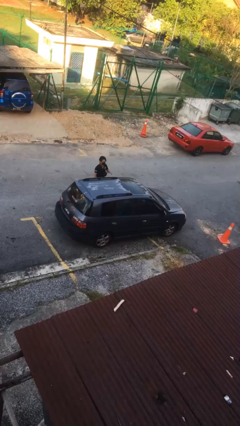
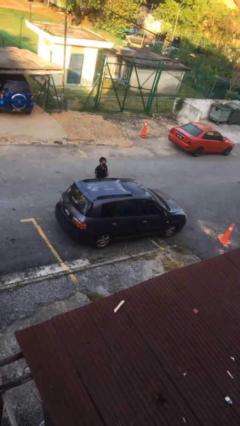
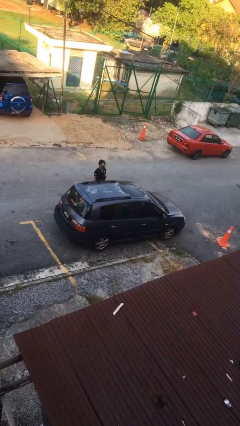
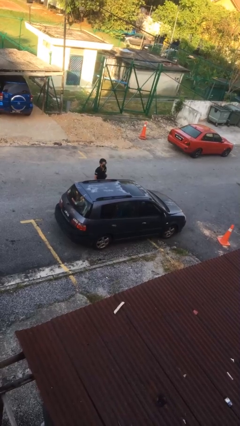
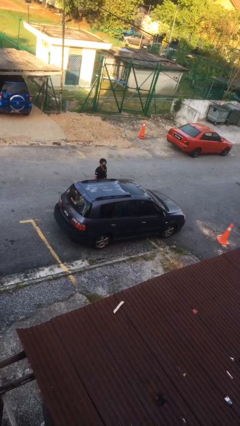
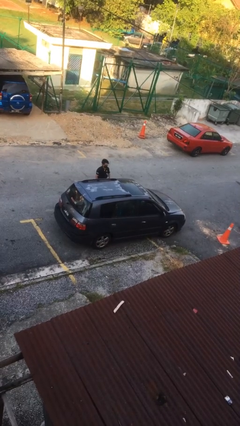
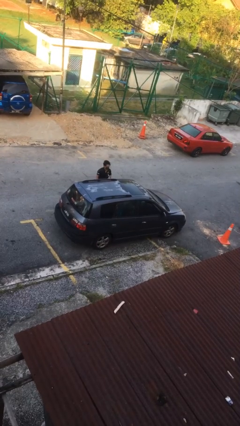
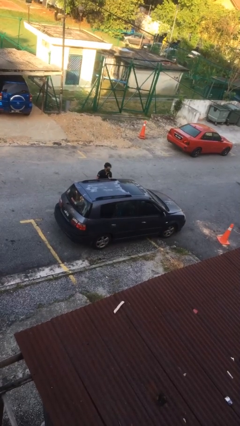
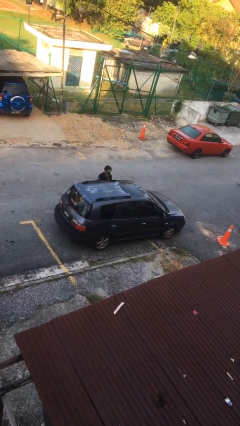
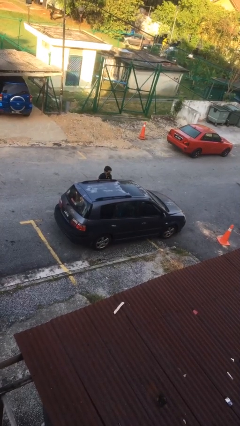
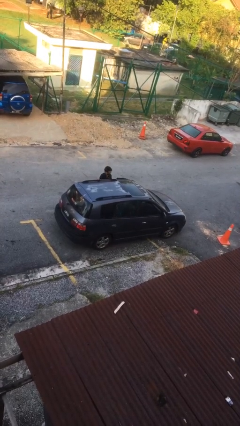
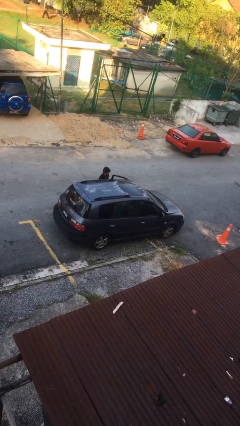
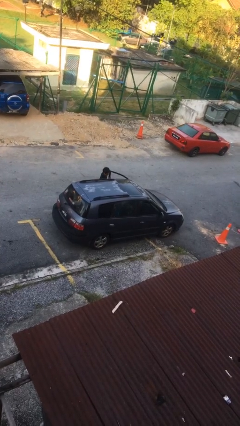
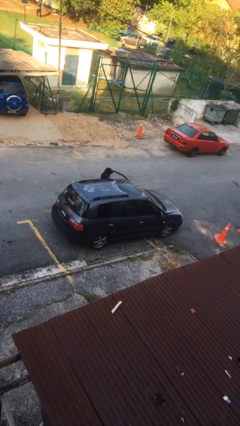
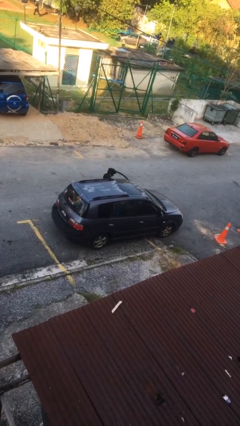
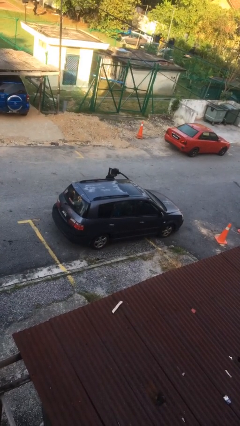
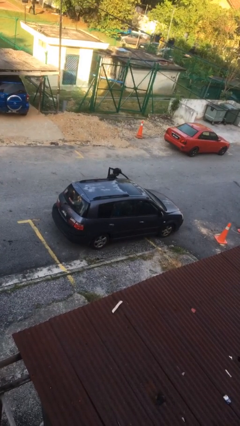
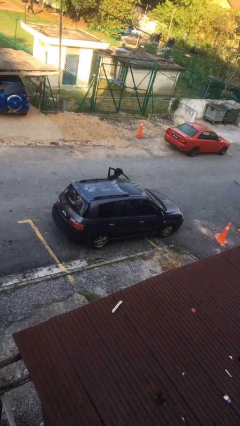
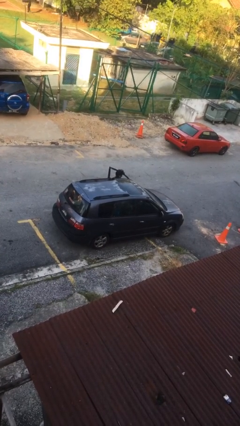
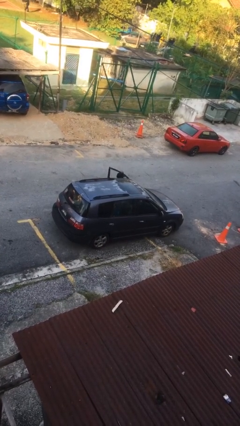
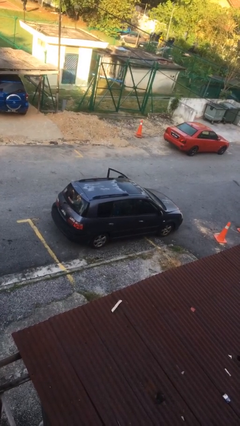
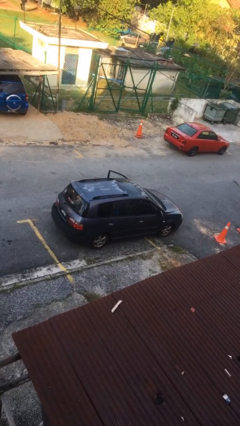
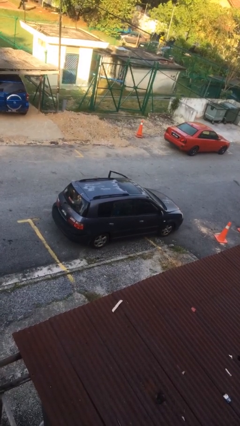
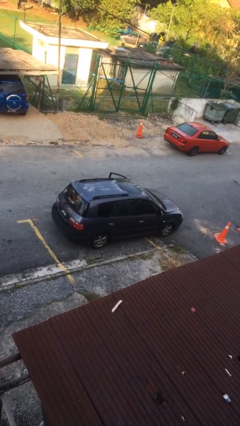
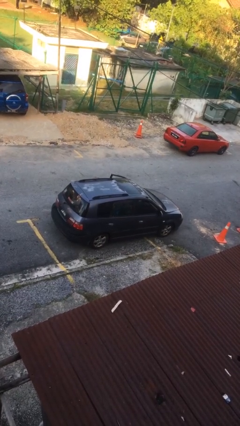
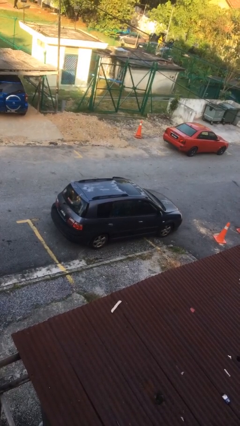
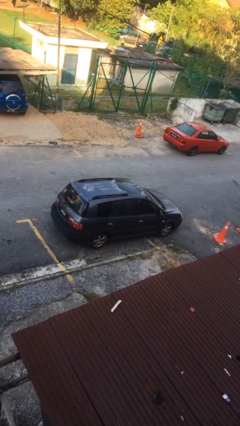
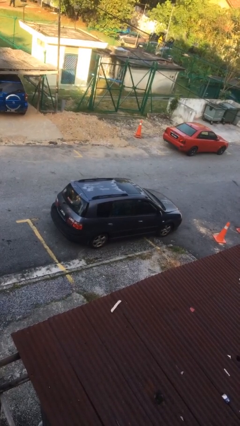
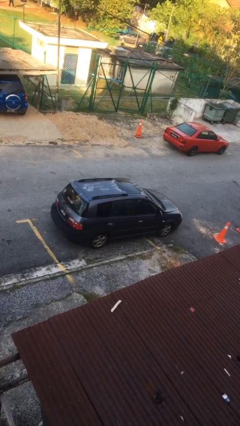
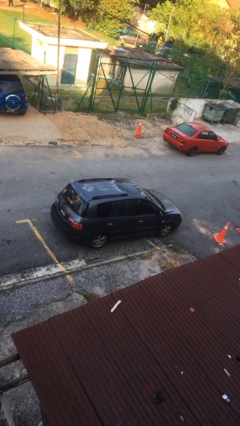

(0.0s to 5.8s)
car picks up person

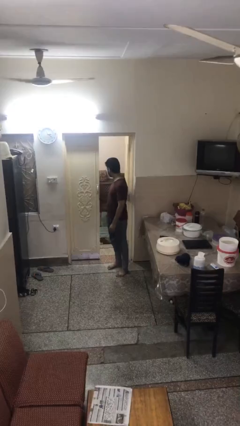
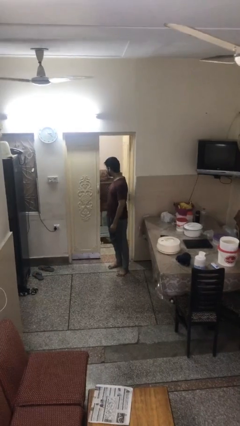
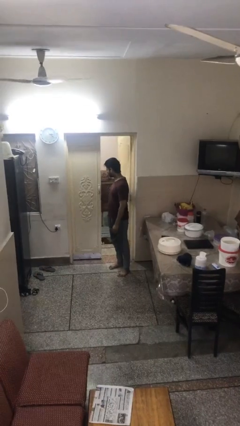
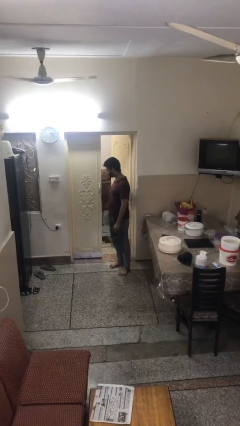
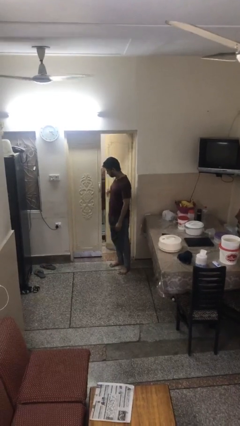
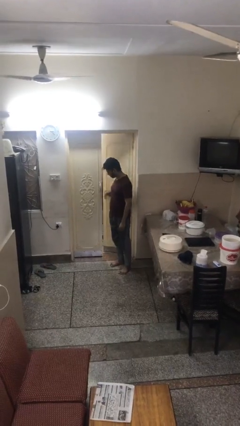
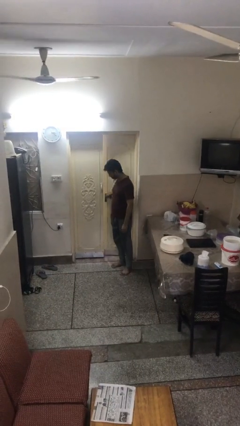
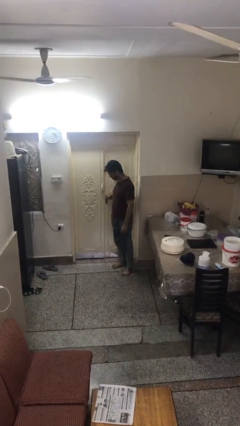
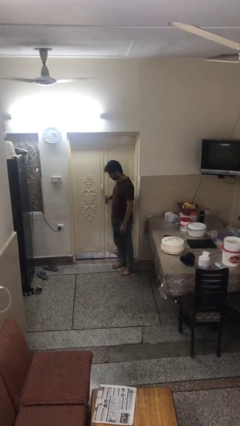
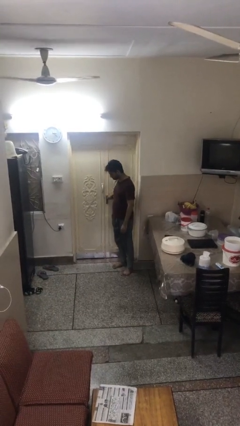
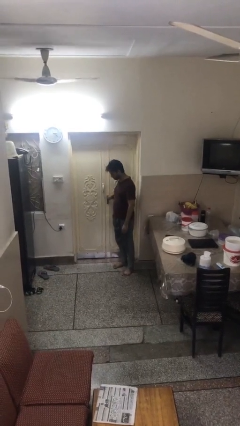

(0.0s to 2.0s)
person closes facility door

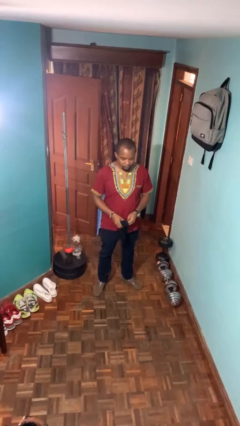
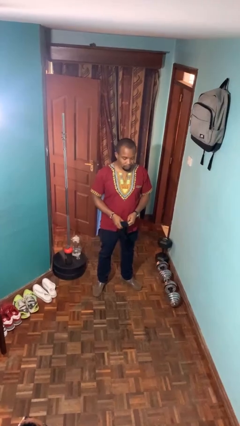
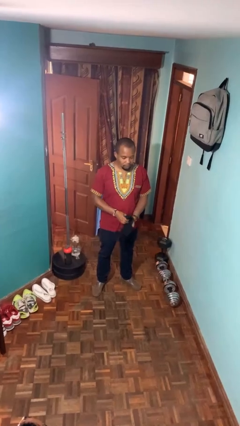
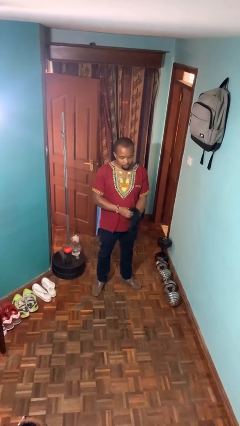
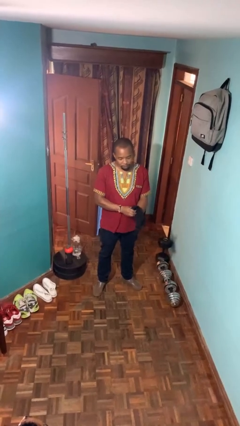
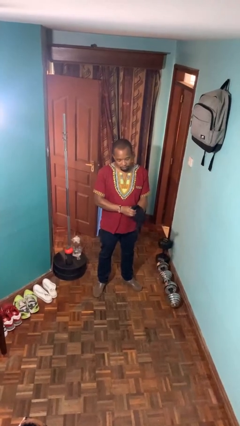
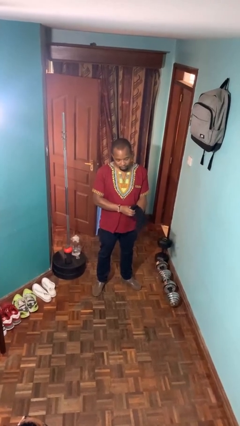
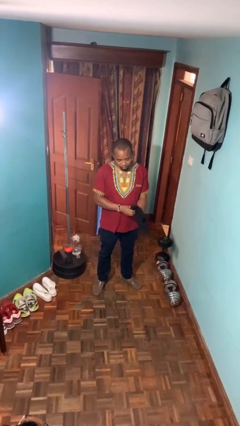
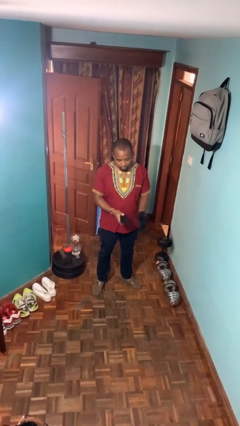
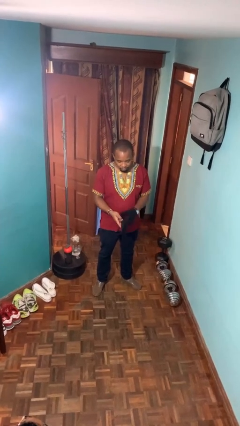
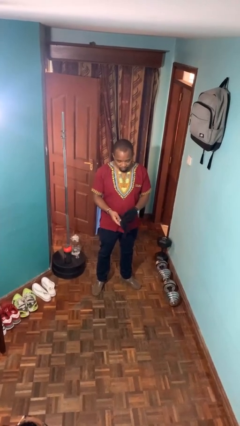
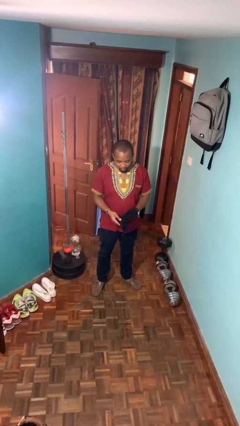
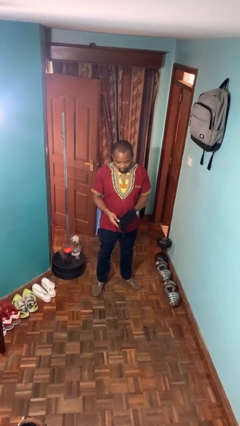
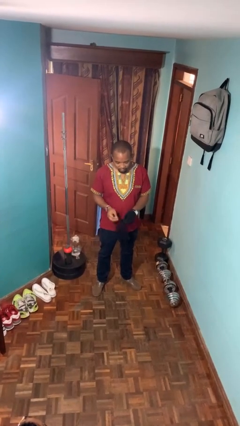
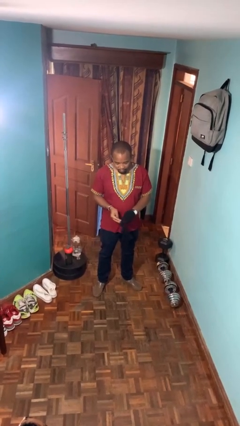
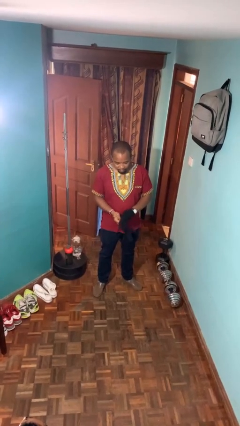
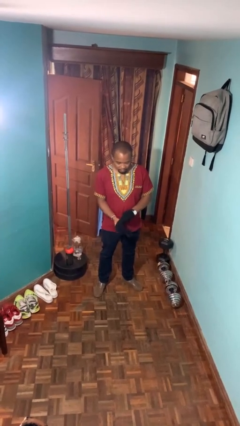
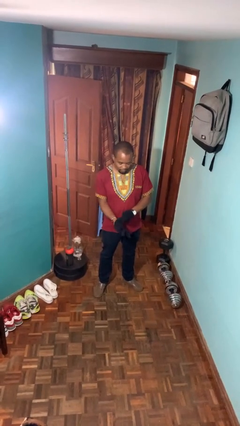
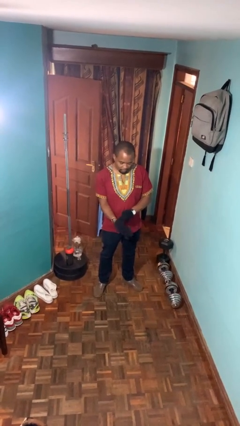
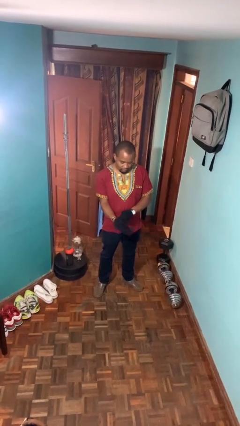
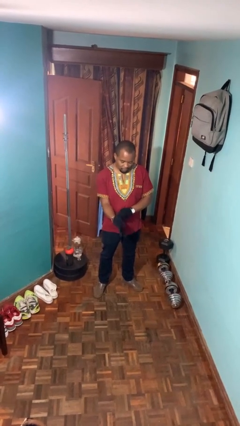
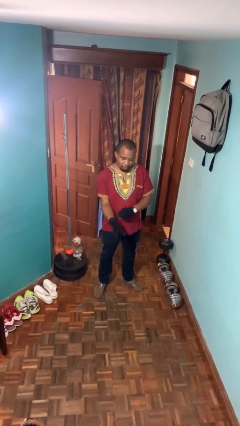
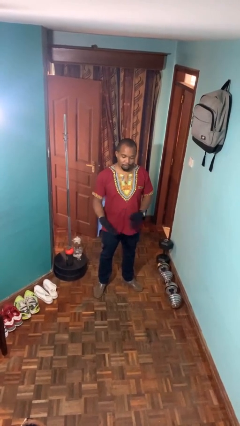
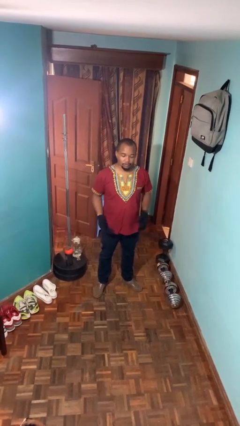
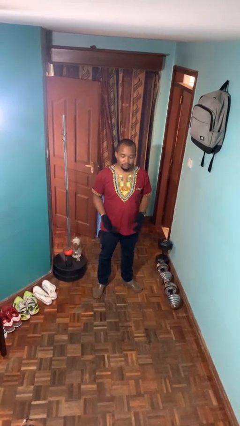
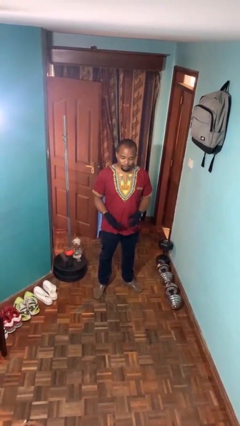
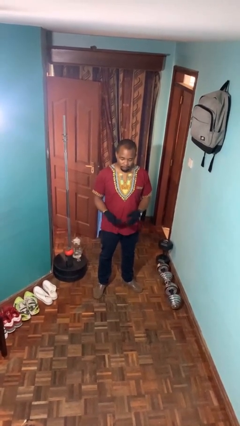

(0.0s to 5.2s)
person puts on gloves

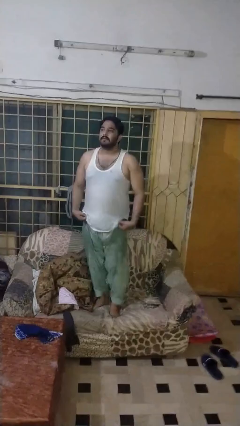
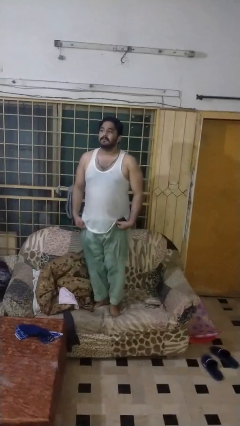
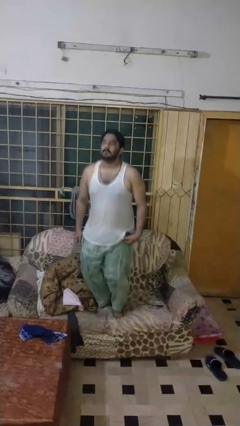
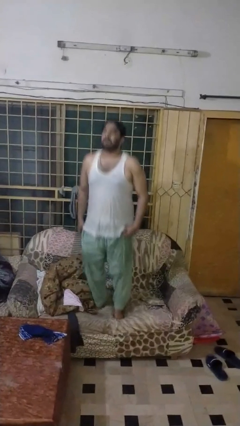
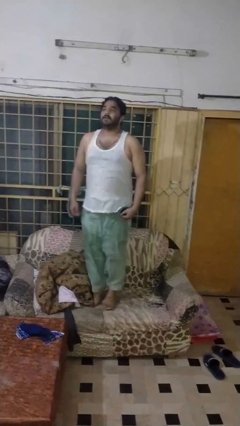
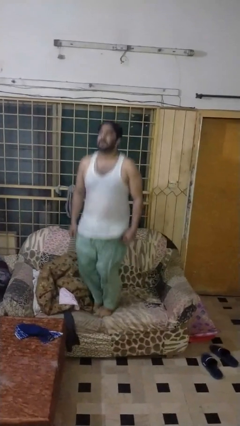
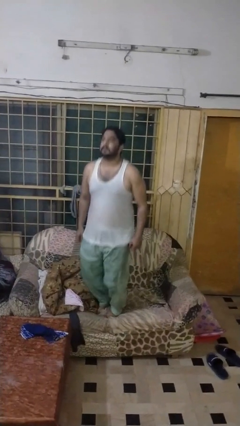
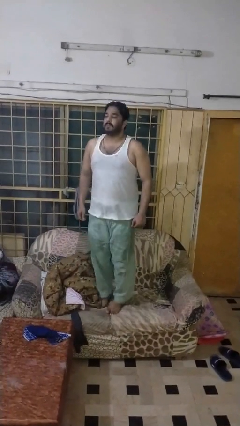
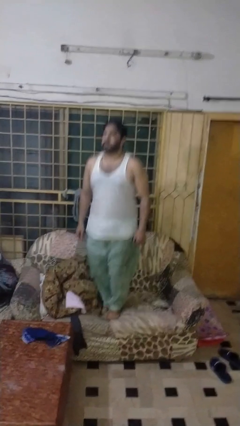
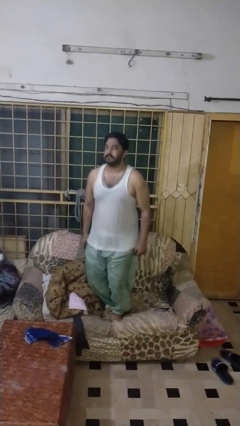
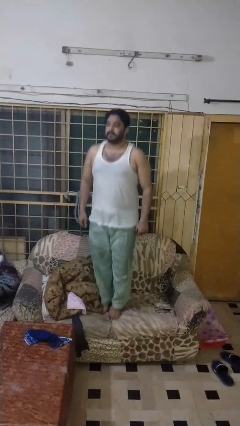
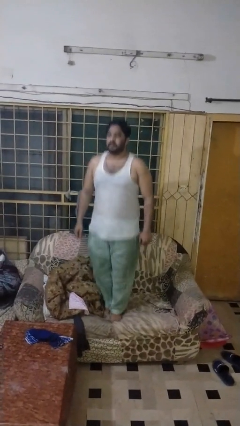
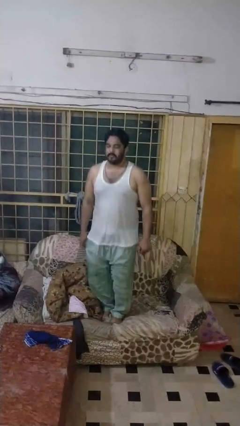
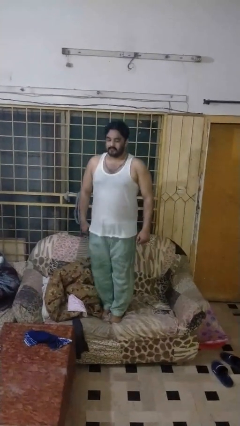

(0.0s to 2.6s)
person jumps on couch

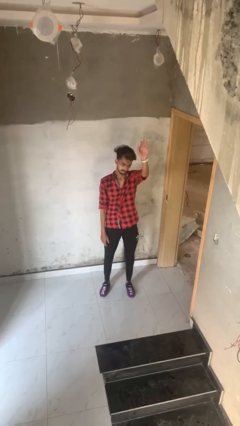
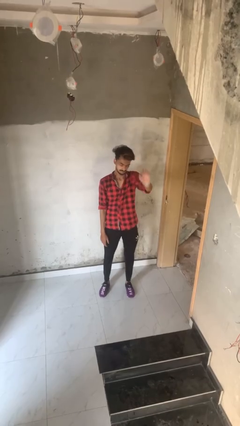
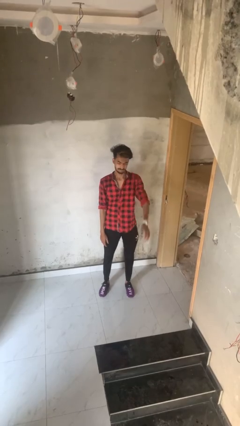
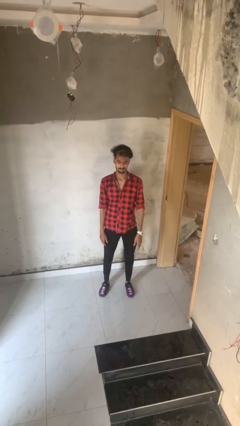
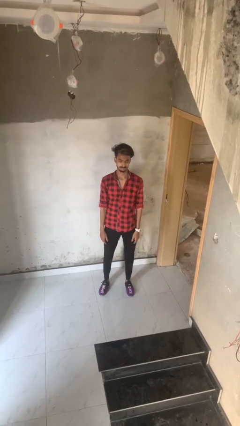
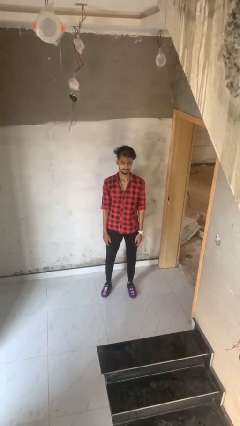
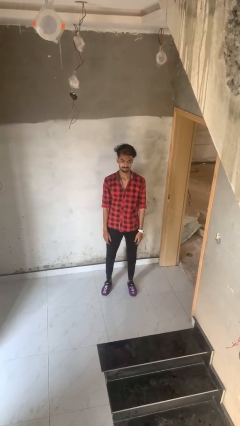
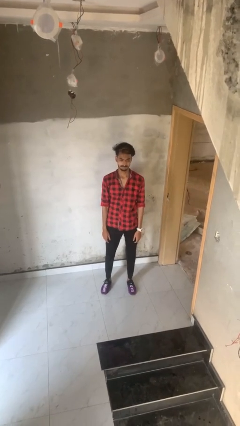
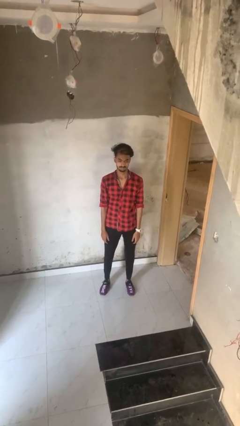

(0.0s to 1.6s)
person gestures lower hand

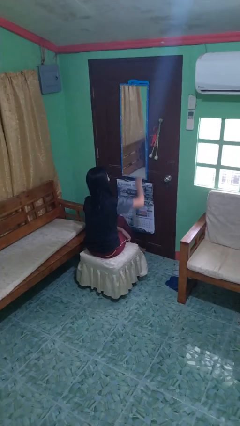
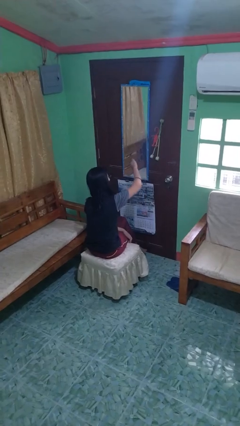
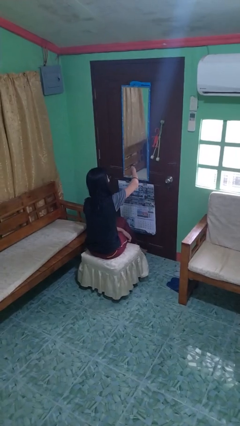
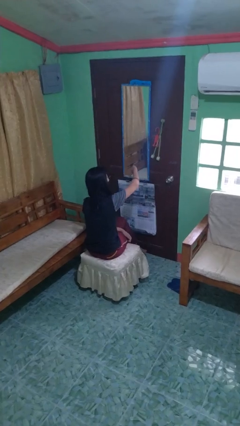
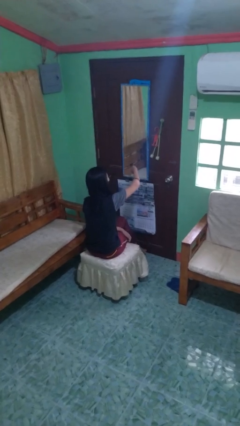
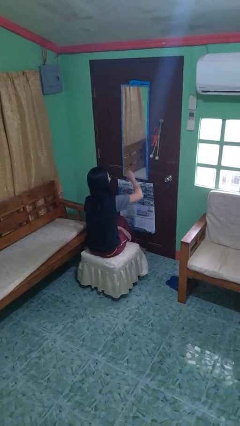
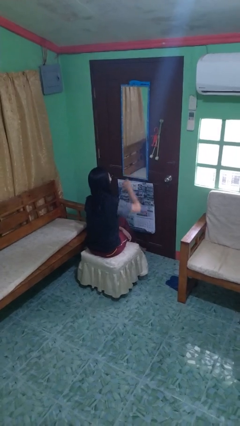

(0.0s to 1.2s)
person gestures thumbs down
